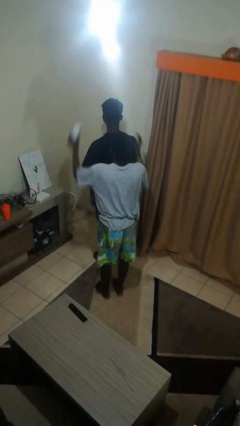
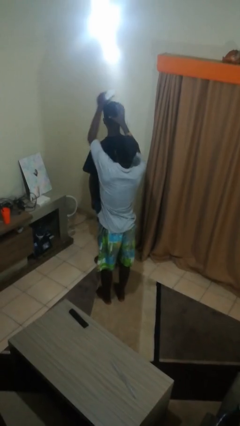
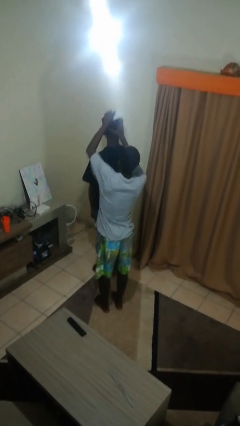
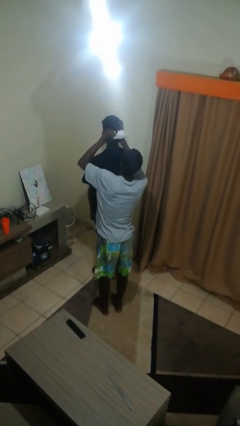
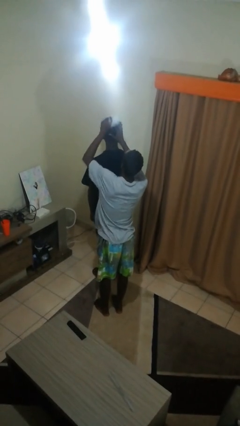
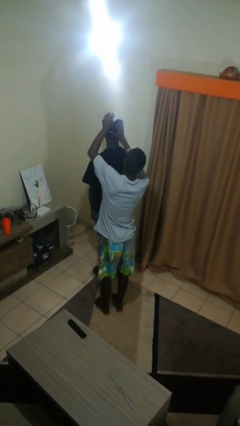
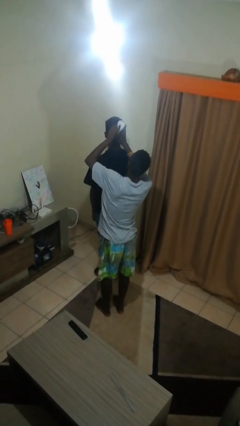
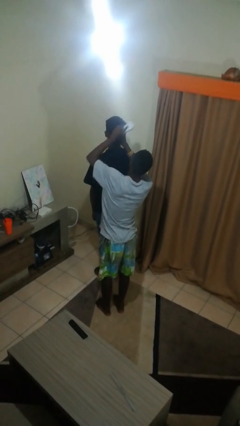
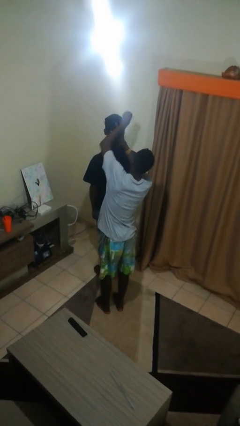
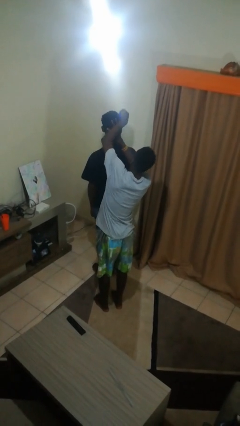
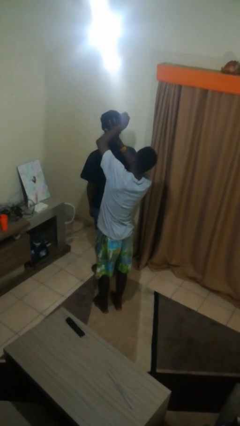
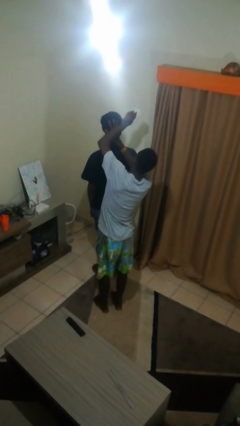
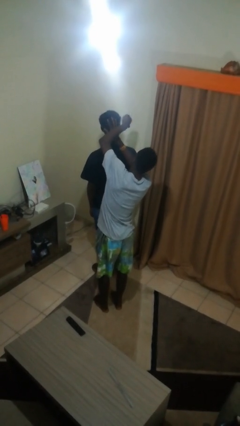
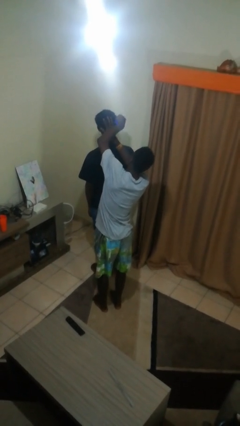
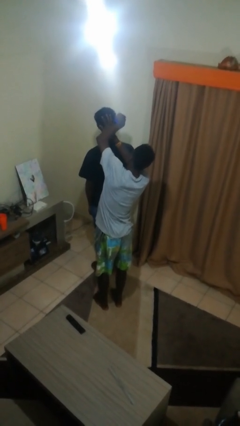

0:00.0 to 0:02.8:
person brushes hair of person

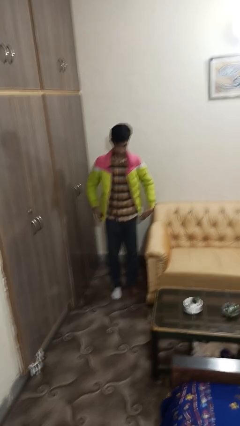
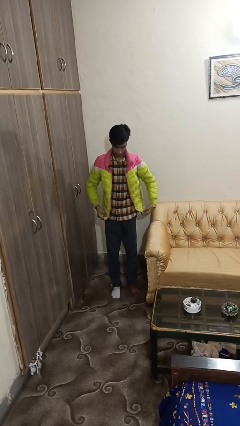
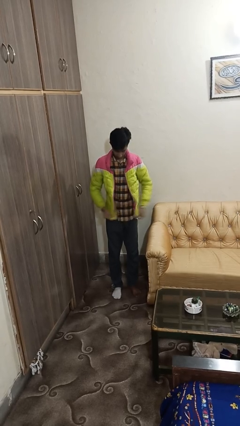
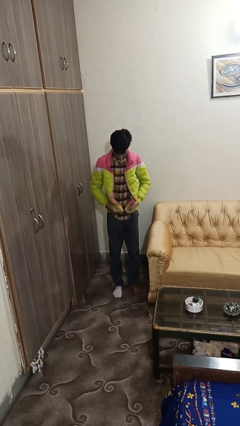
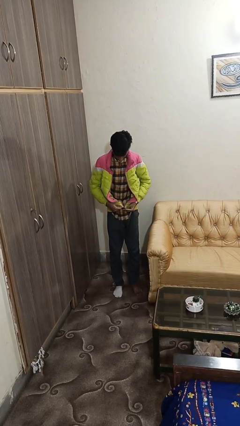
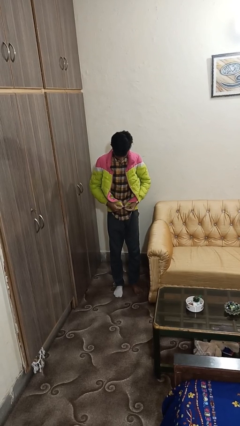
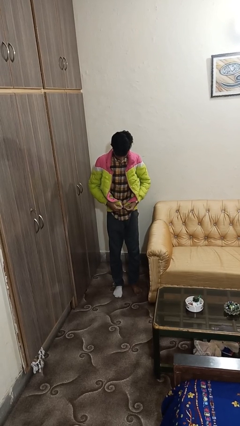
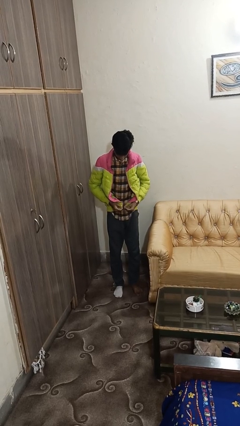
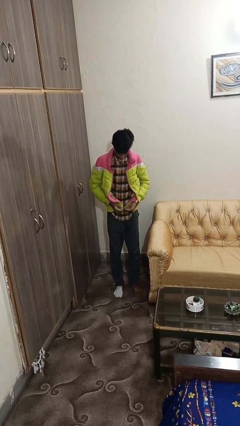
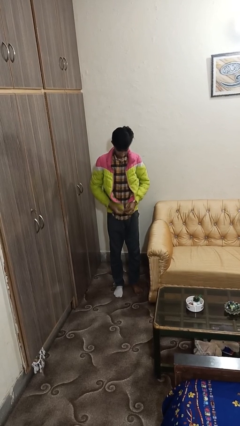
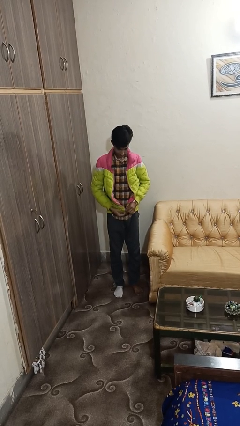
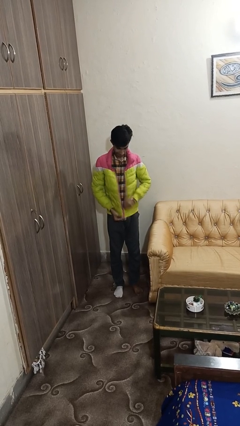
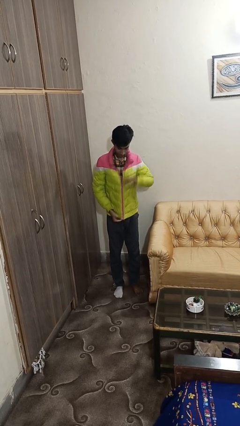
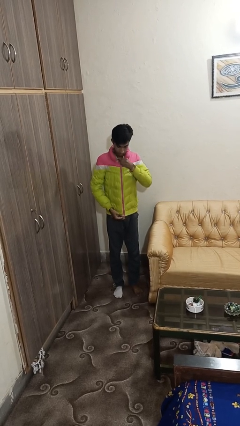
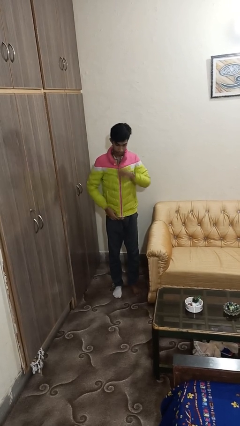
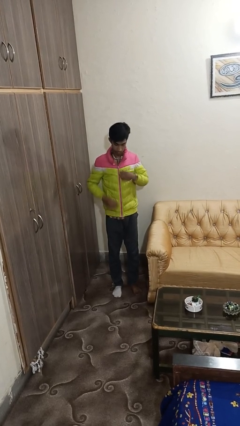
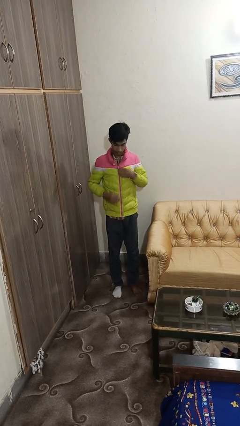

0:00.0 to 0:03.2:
person zips up jacket

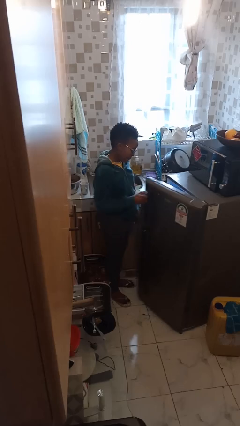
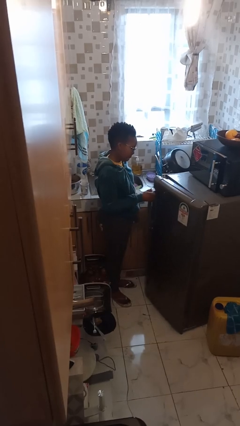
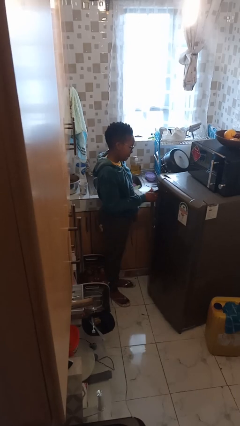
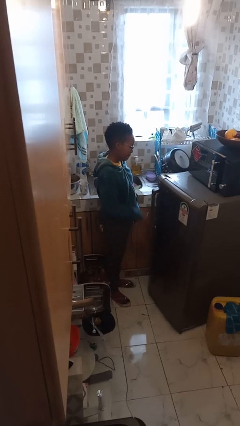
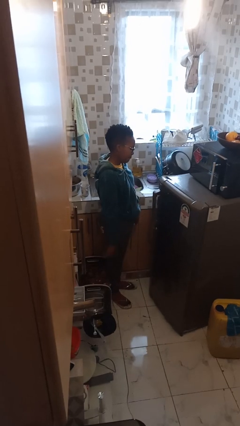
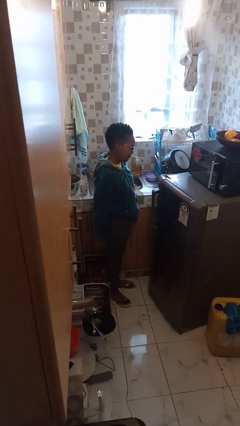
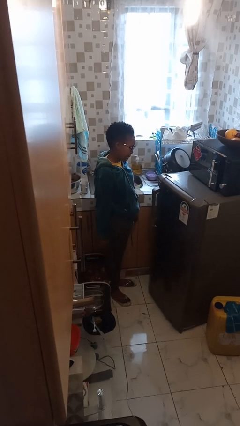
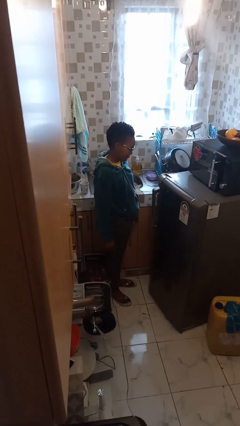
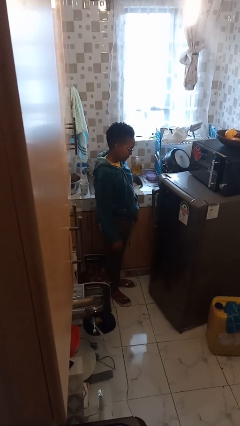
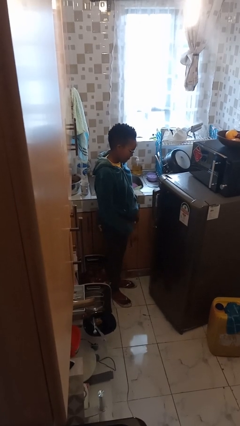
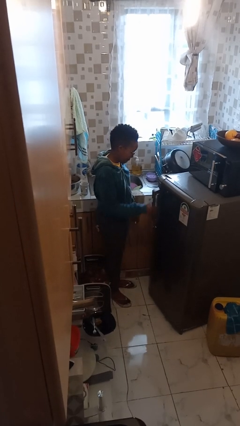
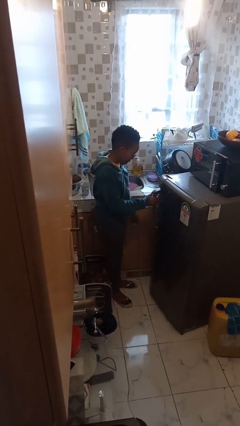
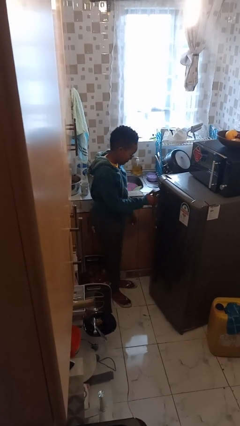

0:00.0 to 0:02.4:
person closes refrigerator

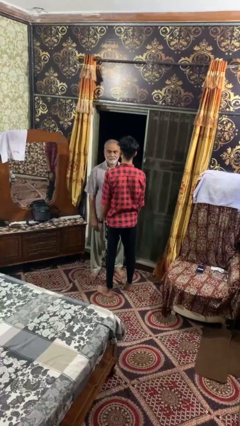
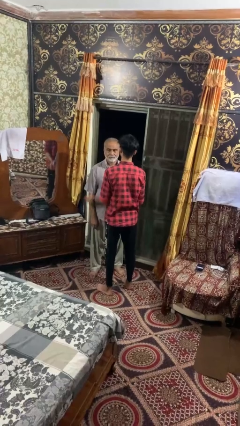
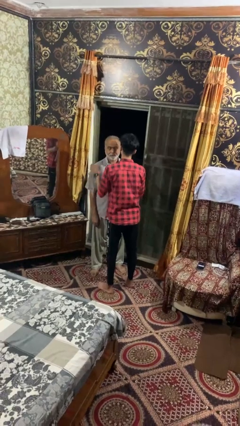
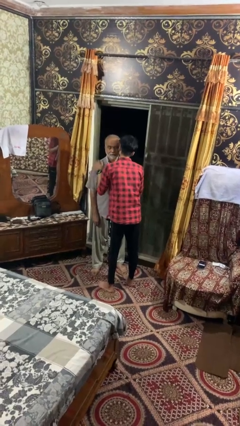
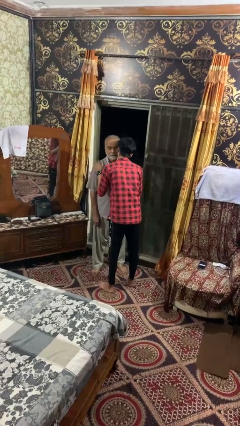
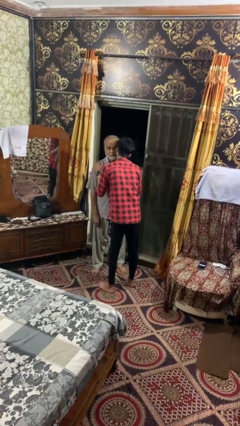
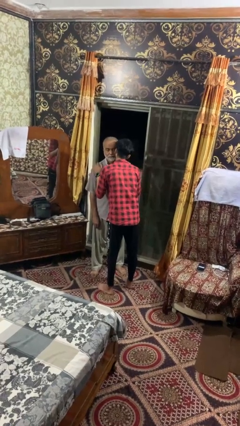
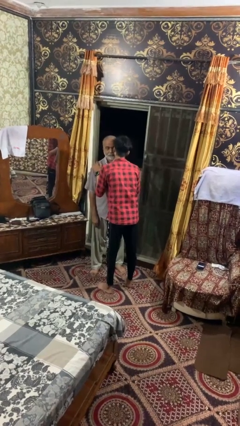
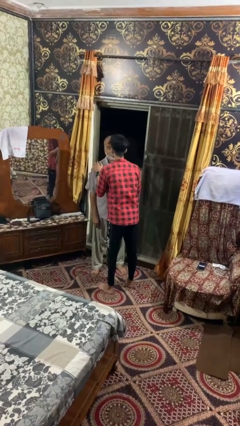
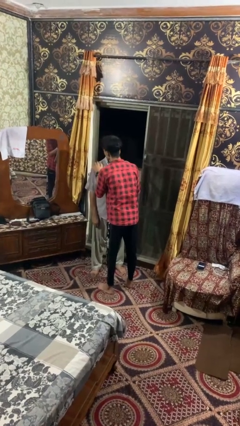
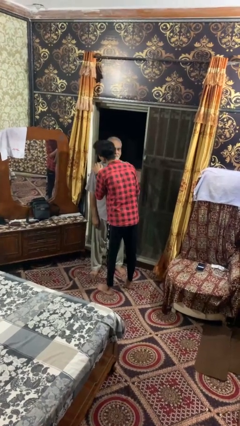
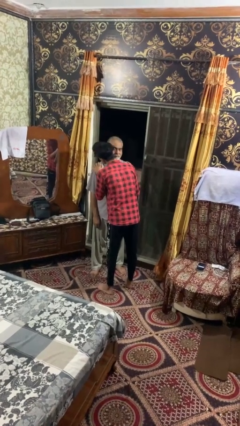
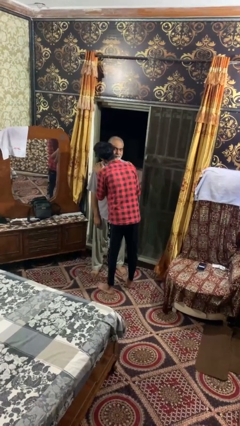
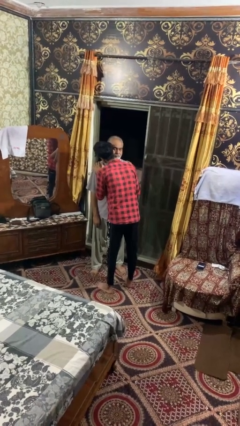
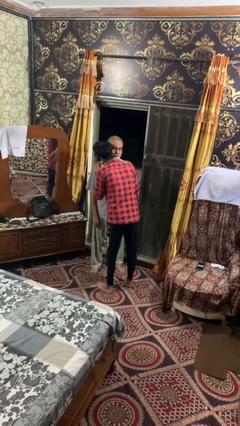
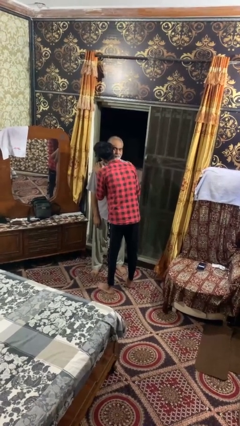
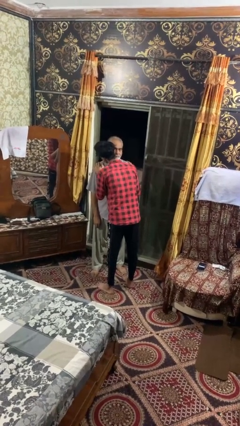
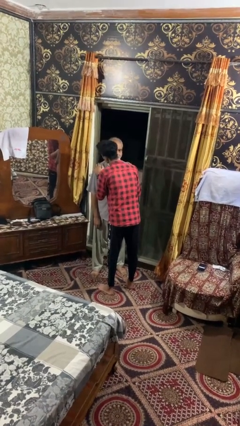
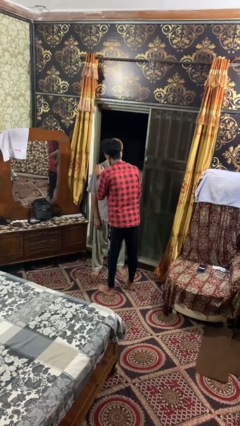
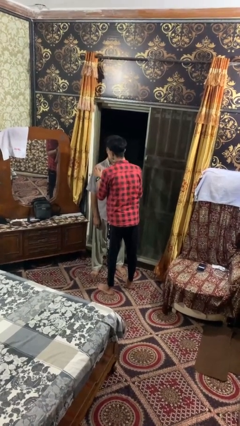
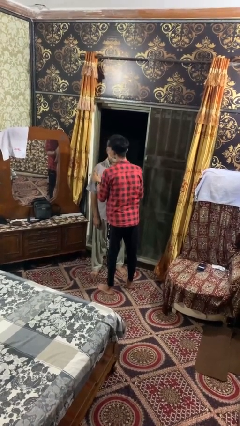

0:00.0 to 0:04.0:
person kisses cheek of person

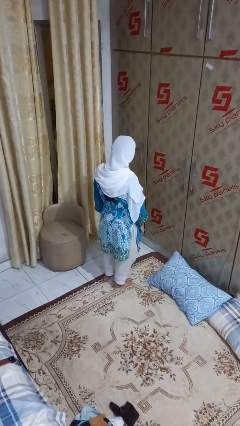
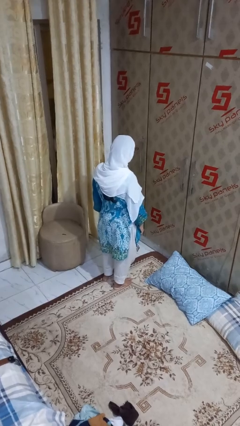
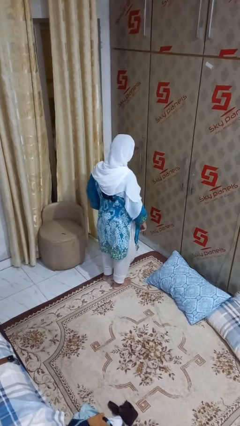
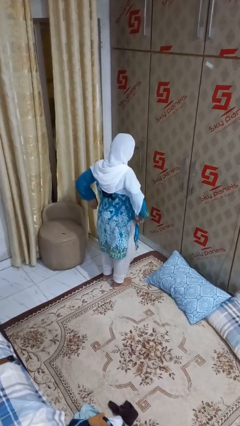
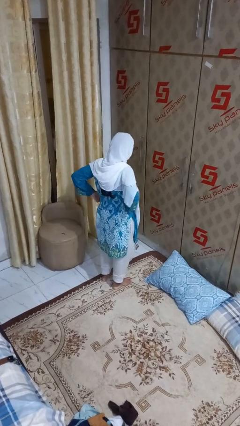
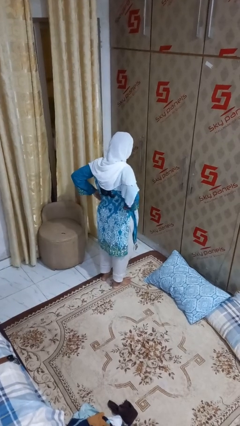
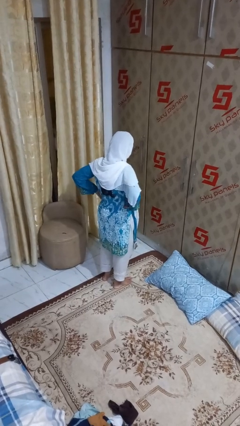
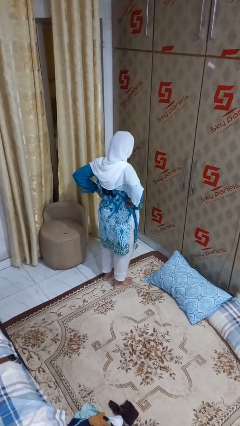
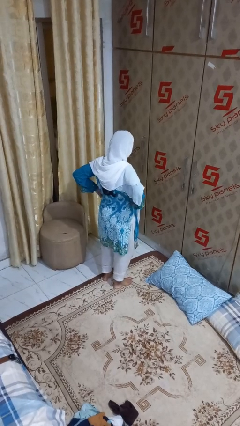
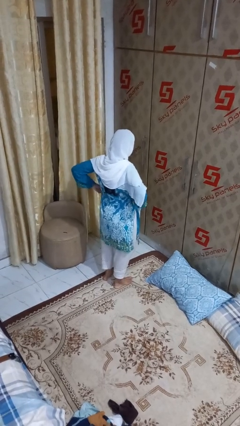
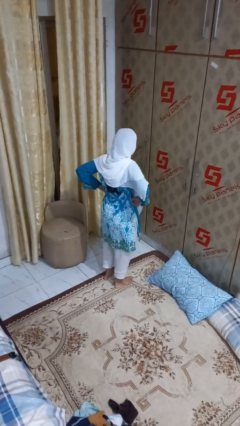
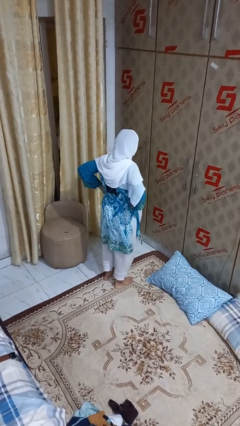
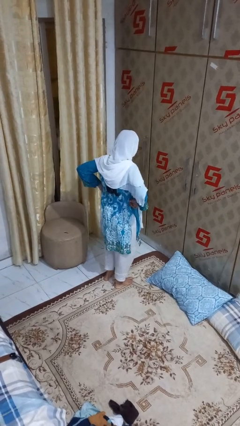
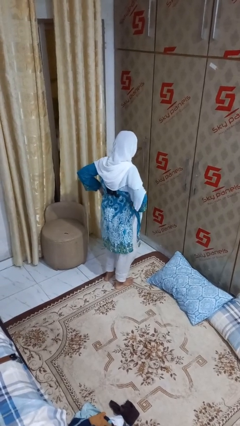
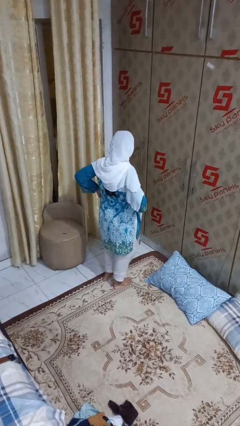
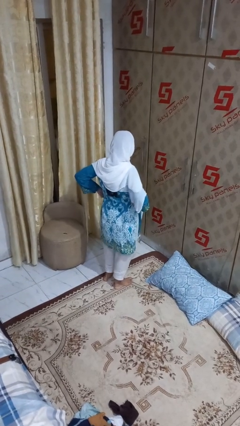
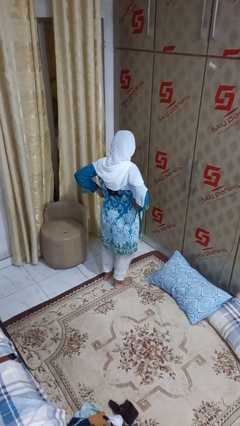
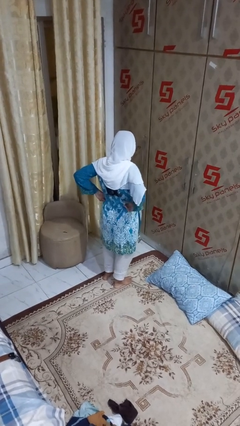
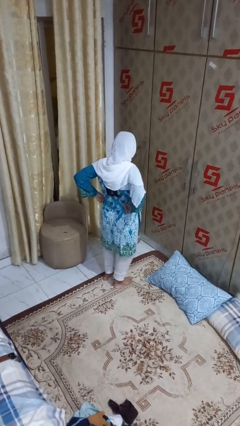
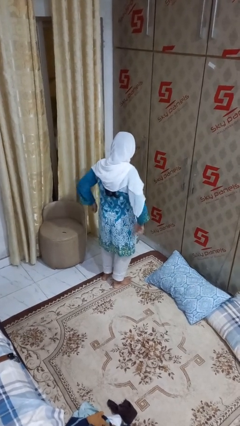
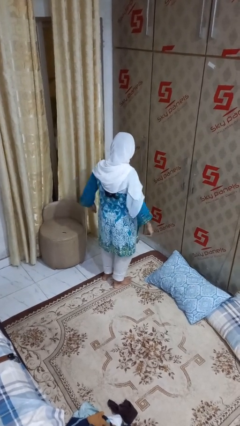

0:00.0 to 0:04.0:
person hikes up pants

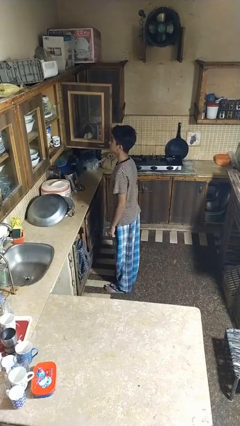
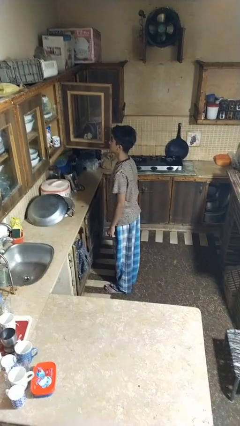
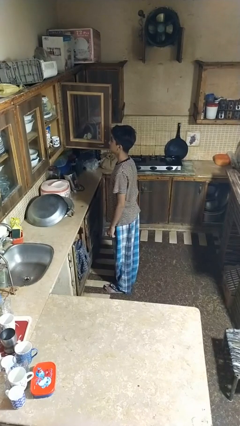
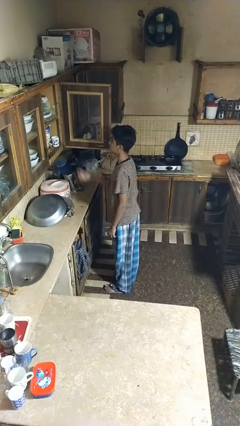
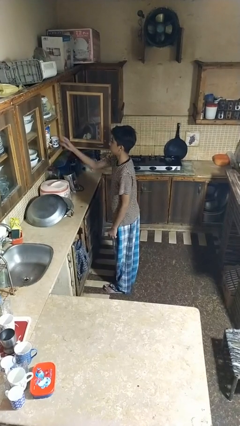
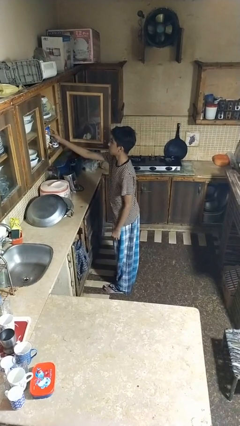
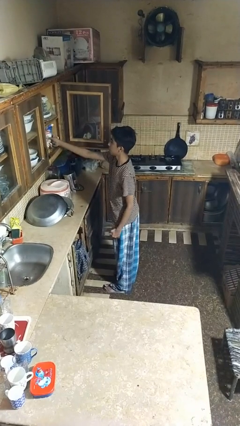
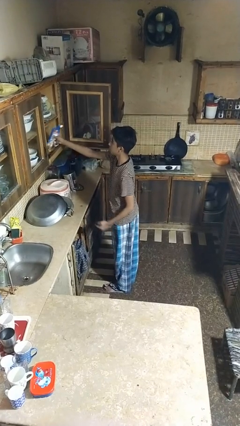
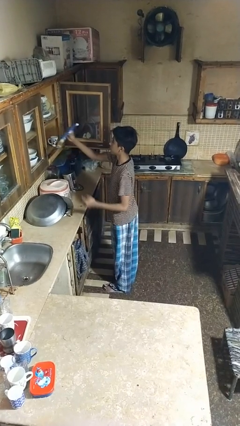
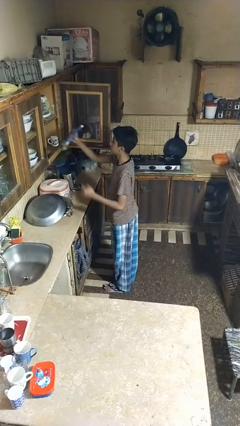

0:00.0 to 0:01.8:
person takes object from cabinet
